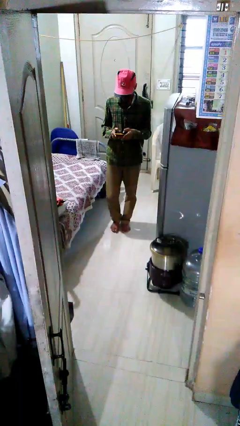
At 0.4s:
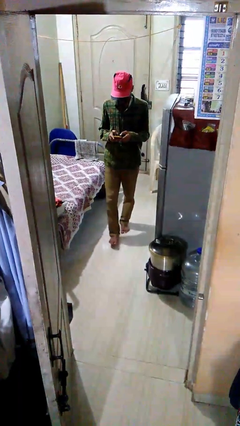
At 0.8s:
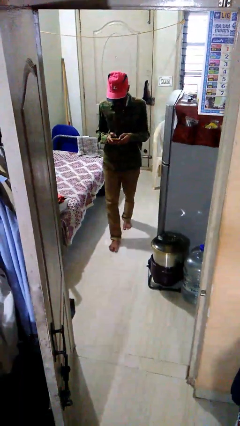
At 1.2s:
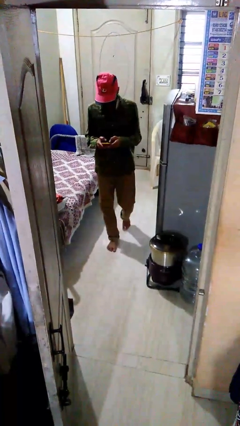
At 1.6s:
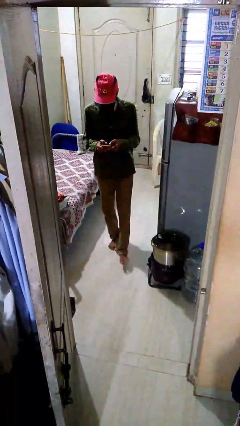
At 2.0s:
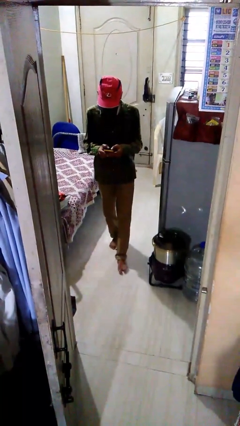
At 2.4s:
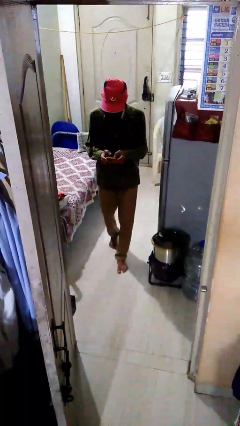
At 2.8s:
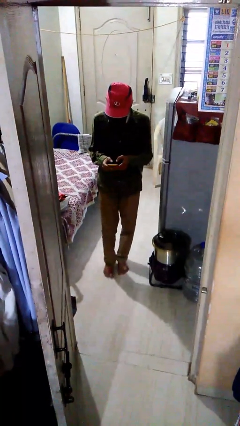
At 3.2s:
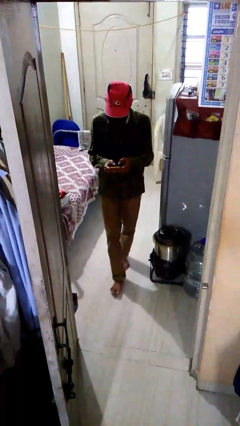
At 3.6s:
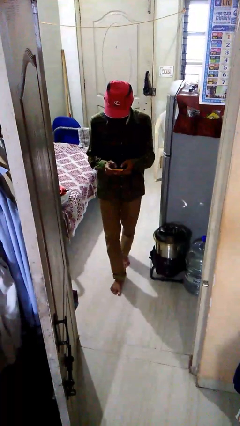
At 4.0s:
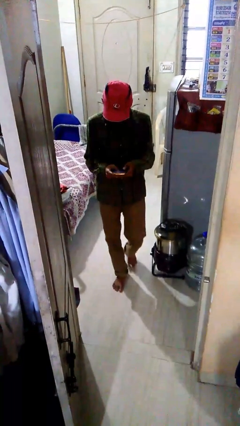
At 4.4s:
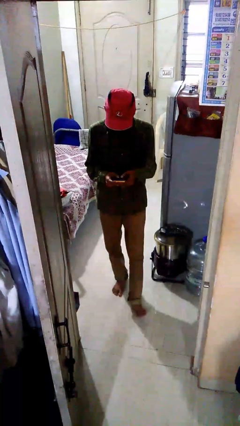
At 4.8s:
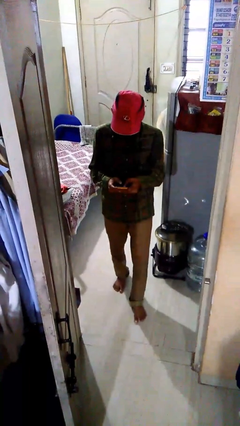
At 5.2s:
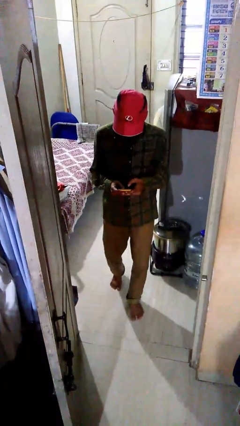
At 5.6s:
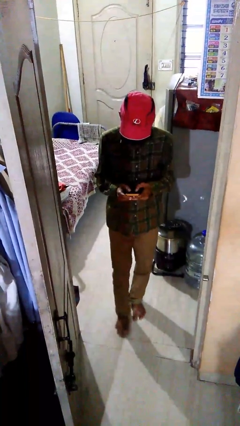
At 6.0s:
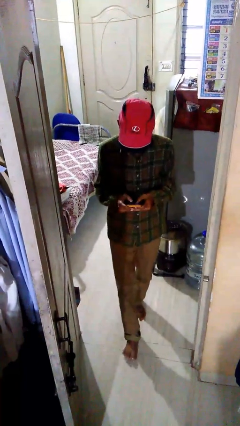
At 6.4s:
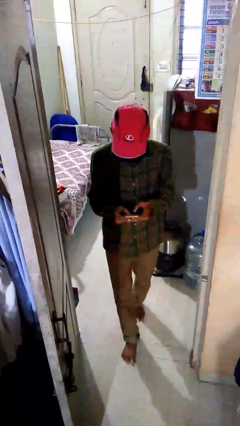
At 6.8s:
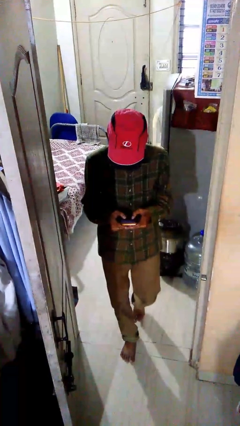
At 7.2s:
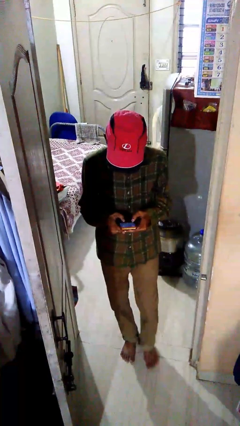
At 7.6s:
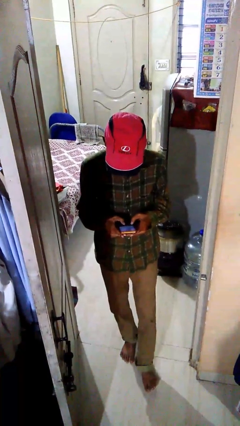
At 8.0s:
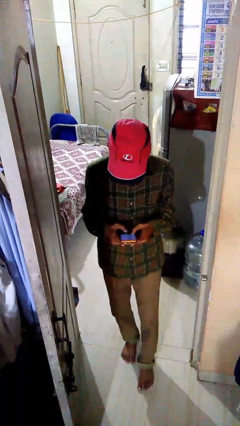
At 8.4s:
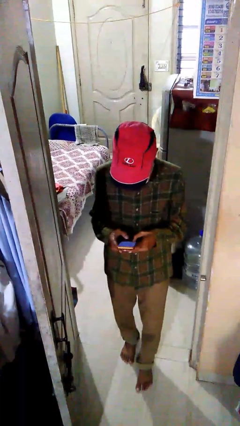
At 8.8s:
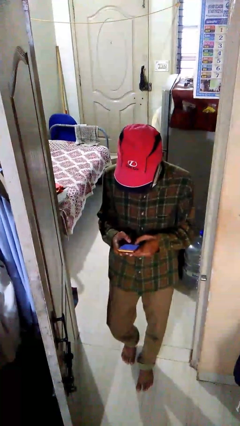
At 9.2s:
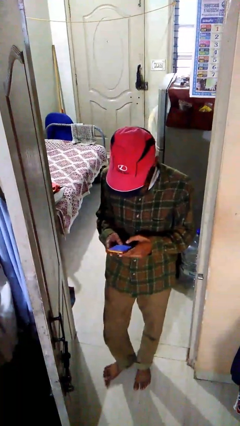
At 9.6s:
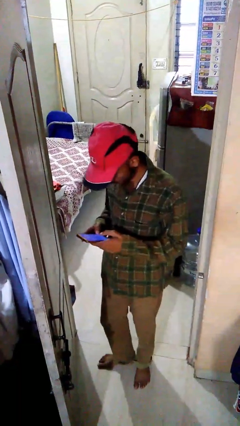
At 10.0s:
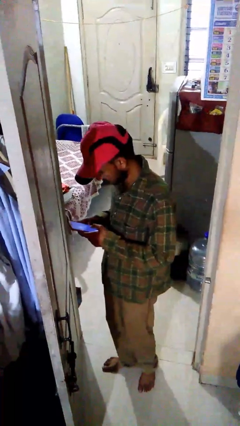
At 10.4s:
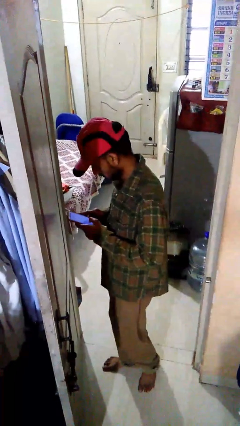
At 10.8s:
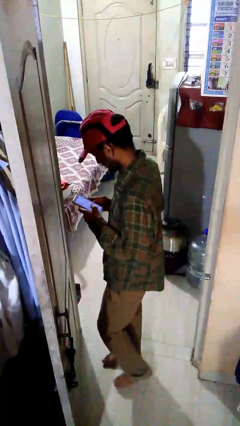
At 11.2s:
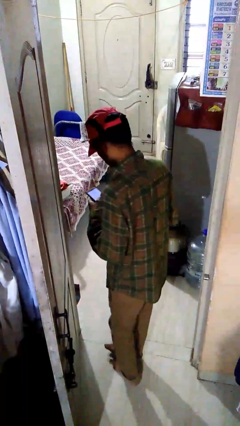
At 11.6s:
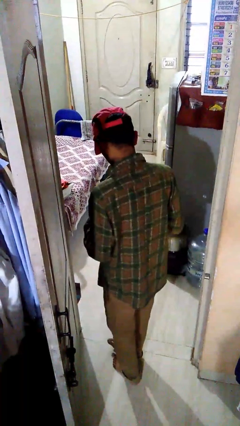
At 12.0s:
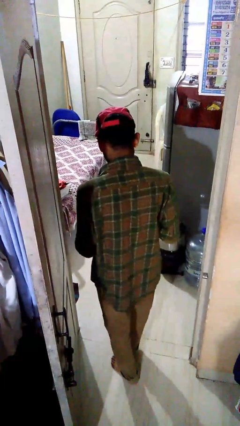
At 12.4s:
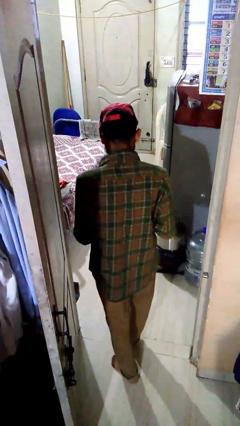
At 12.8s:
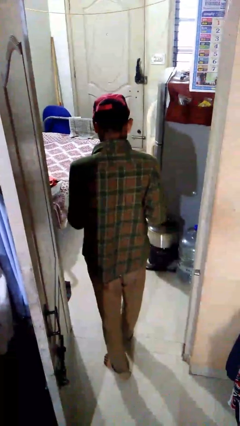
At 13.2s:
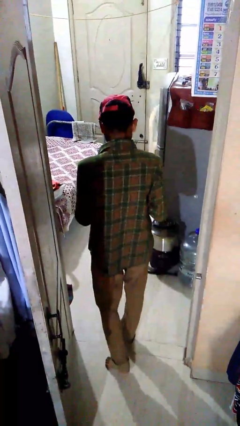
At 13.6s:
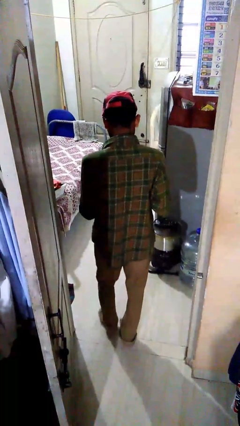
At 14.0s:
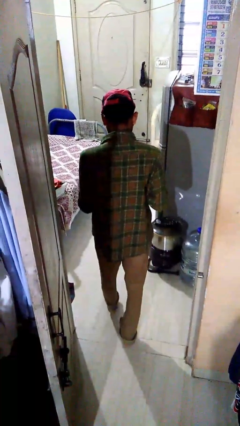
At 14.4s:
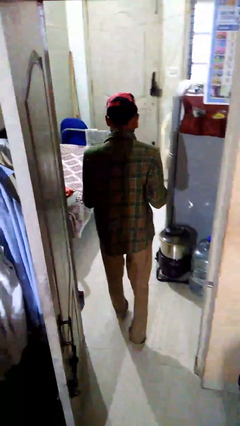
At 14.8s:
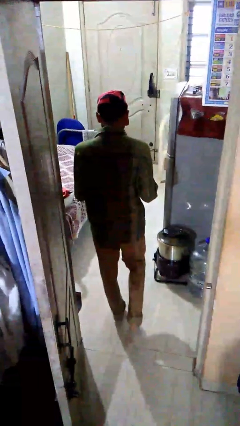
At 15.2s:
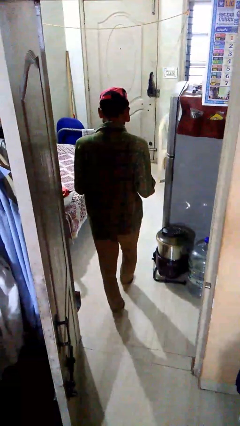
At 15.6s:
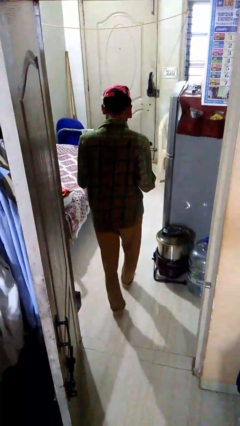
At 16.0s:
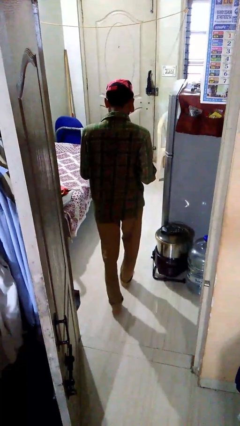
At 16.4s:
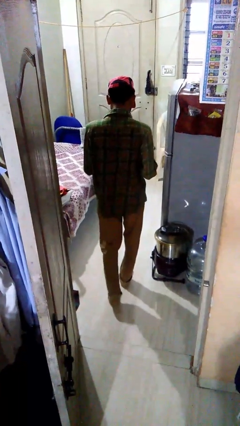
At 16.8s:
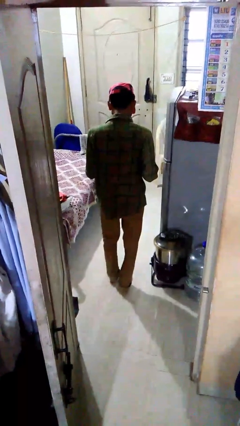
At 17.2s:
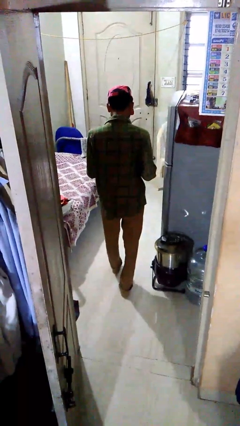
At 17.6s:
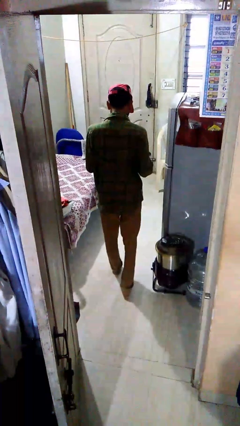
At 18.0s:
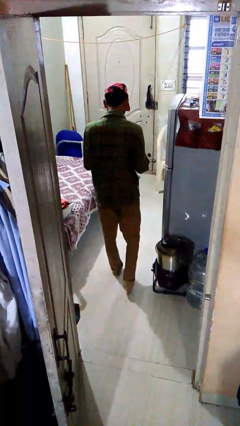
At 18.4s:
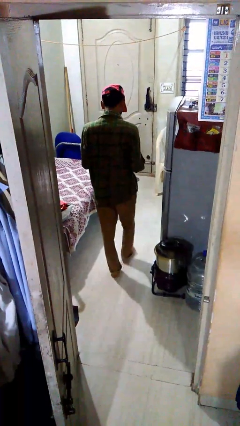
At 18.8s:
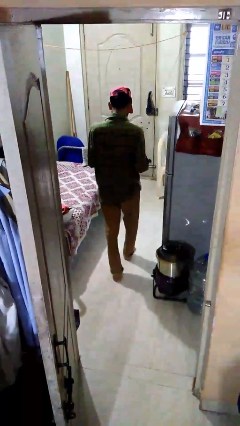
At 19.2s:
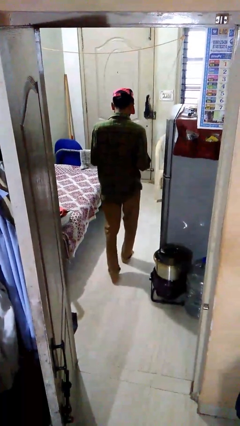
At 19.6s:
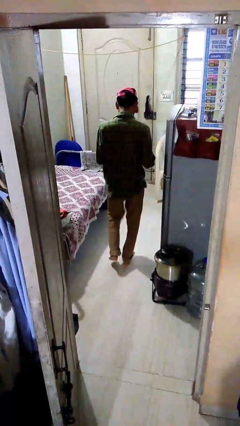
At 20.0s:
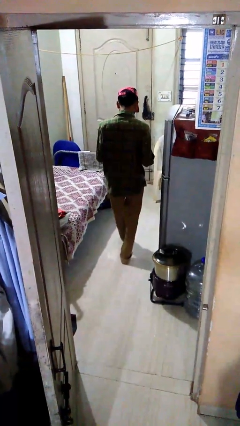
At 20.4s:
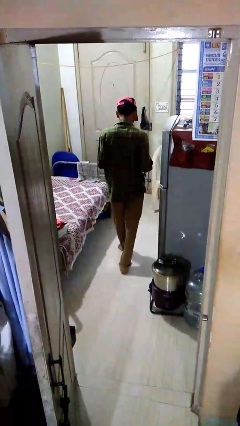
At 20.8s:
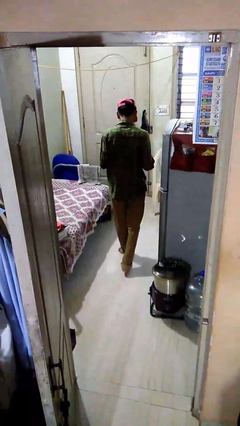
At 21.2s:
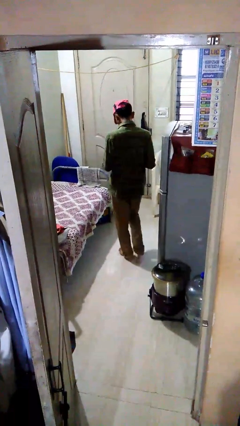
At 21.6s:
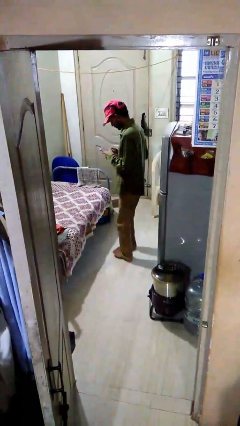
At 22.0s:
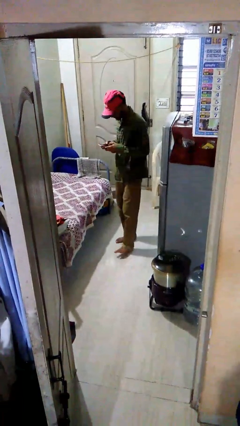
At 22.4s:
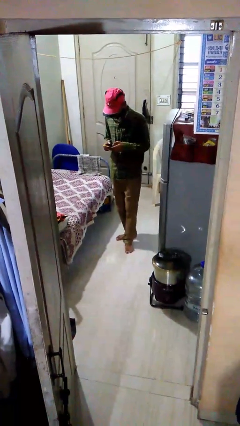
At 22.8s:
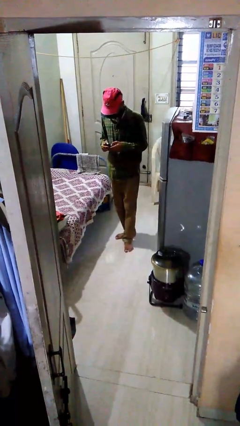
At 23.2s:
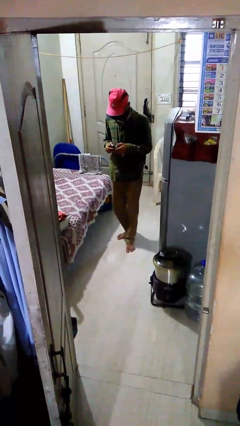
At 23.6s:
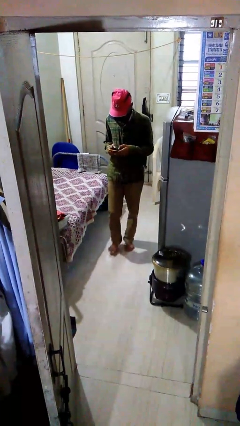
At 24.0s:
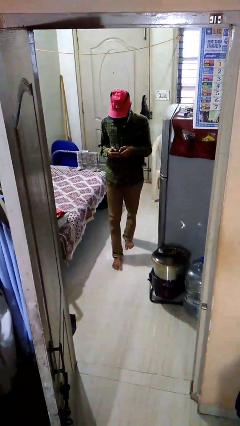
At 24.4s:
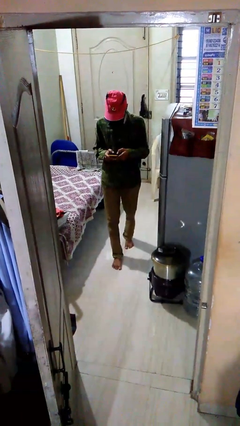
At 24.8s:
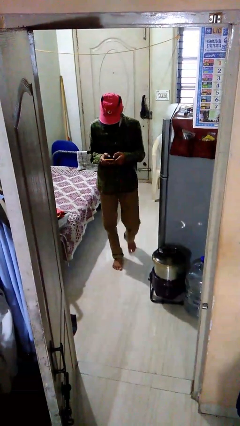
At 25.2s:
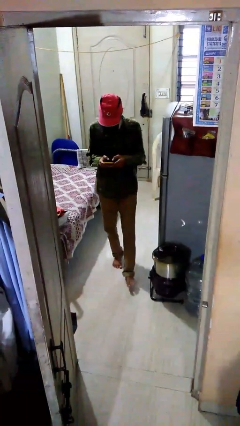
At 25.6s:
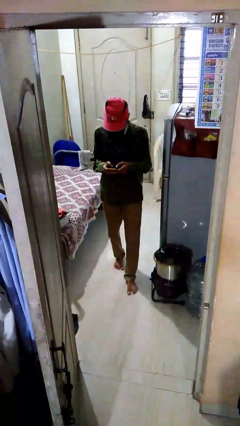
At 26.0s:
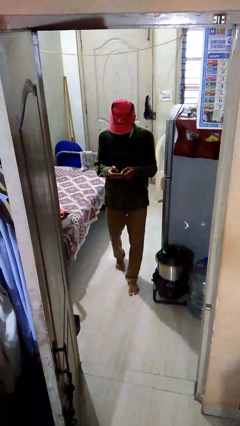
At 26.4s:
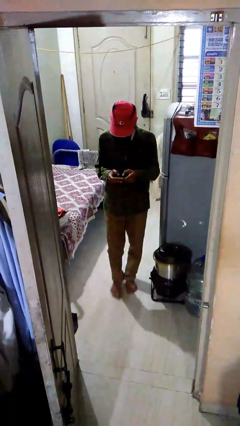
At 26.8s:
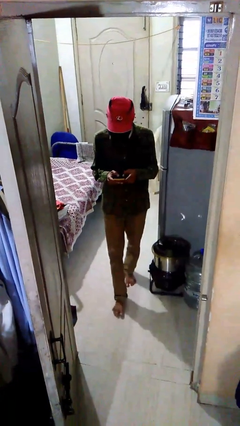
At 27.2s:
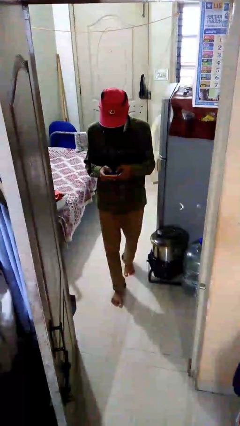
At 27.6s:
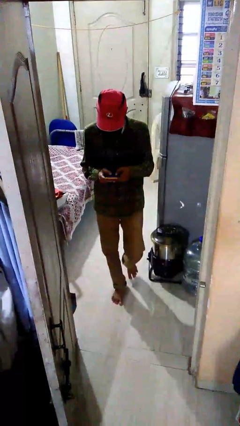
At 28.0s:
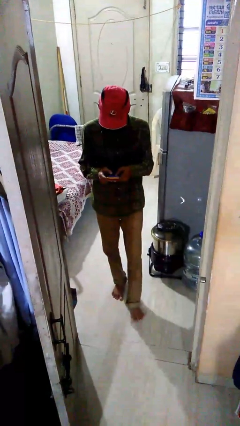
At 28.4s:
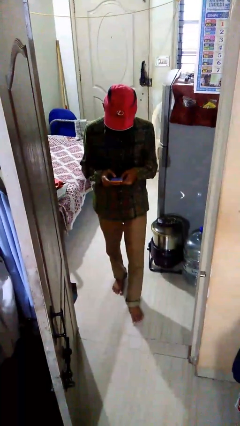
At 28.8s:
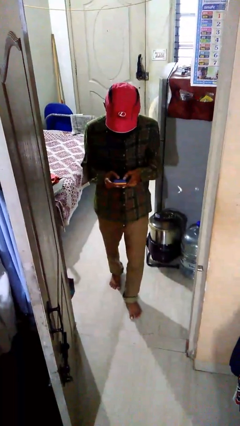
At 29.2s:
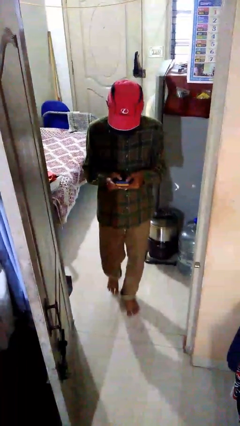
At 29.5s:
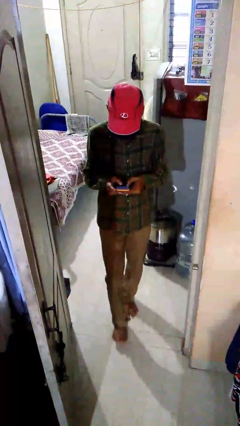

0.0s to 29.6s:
person enters scene through structure

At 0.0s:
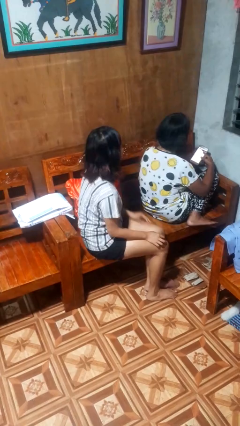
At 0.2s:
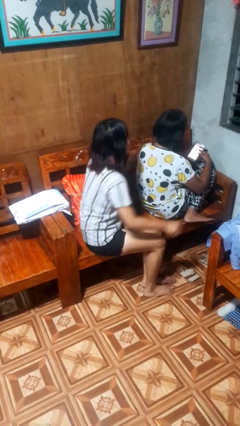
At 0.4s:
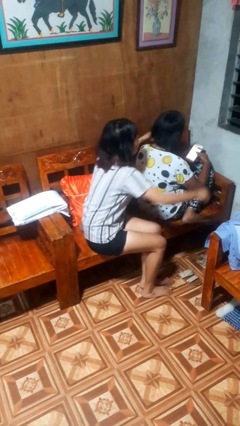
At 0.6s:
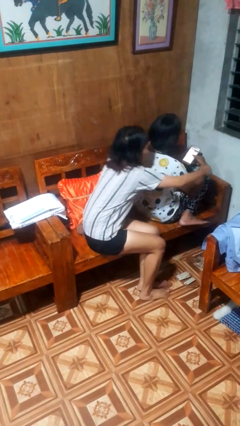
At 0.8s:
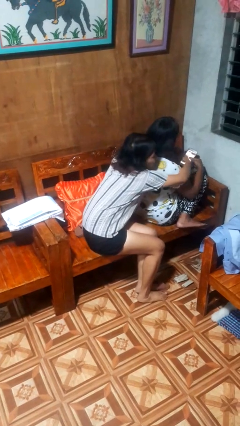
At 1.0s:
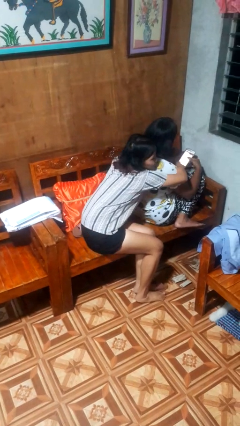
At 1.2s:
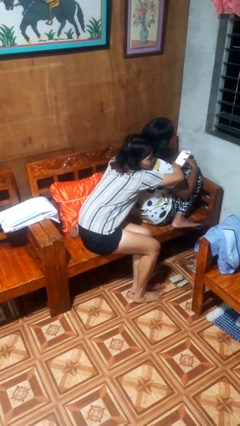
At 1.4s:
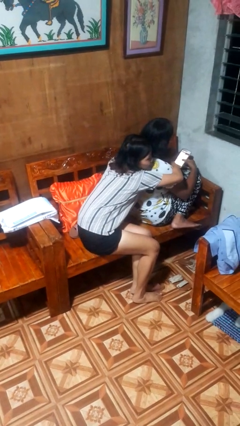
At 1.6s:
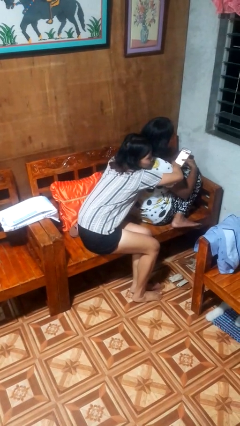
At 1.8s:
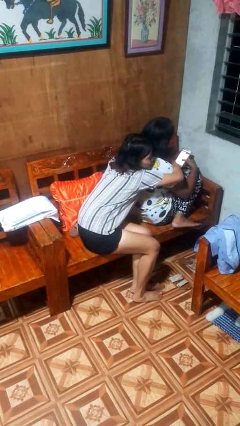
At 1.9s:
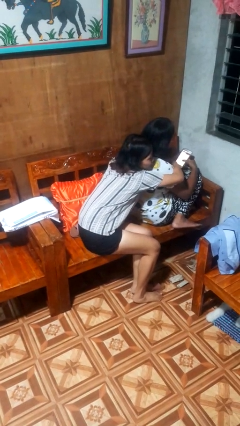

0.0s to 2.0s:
person hugs person from behind

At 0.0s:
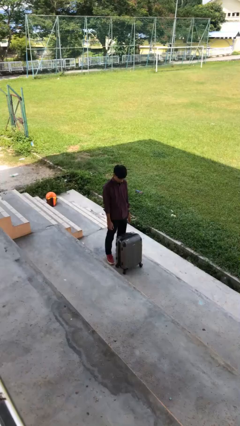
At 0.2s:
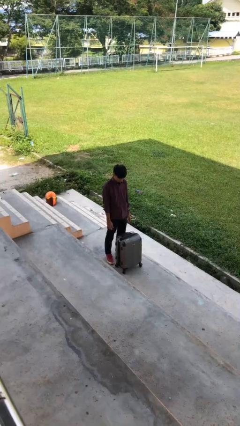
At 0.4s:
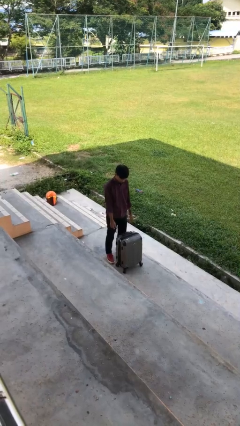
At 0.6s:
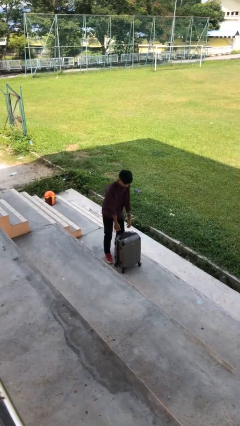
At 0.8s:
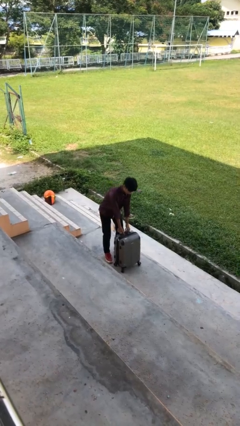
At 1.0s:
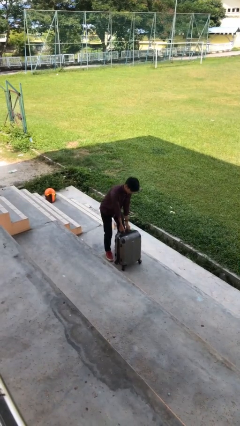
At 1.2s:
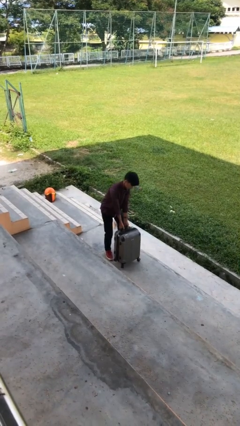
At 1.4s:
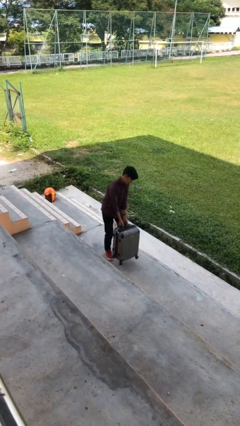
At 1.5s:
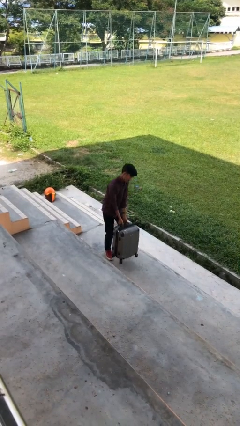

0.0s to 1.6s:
person picks up object from floor
